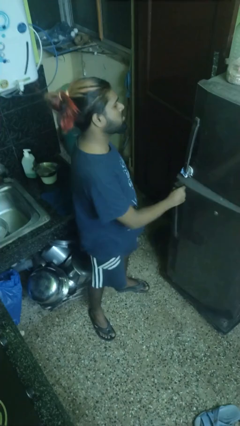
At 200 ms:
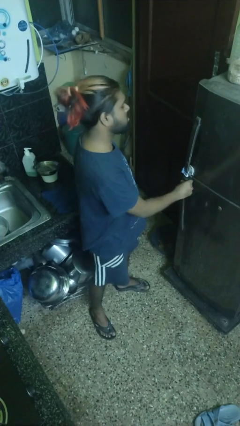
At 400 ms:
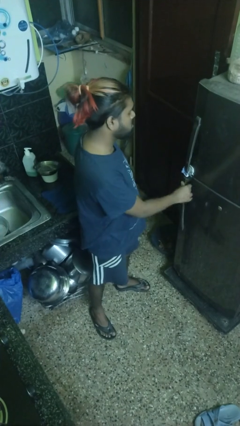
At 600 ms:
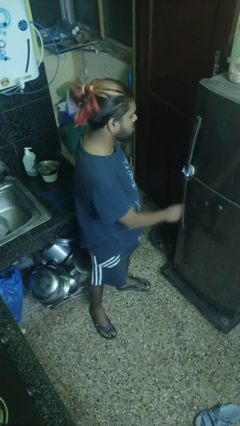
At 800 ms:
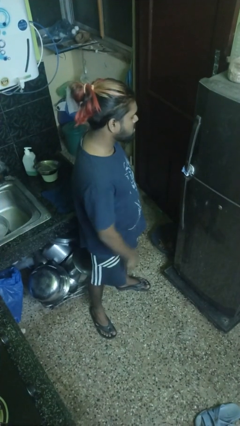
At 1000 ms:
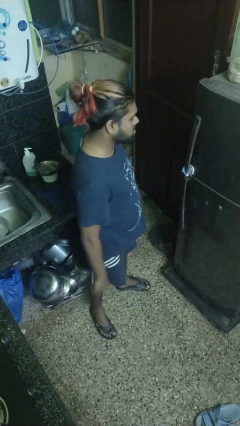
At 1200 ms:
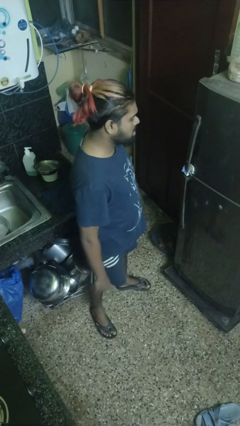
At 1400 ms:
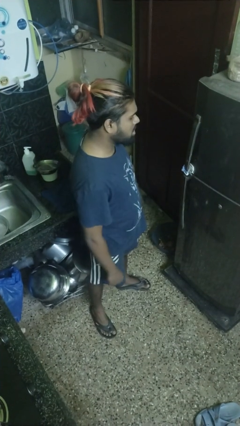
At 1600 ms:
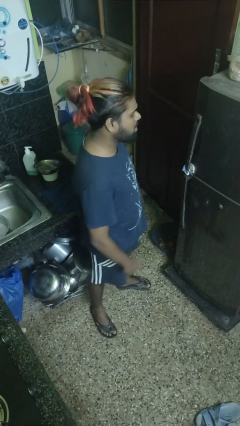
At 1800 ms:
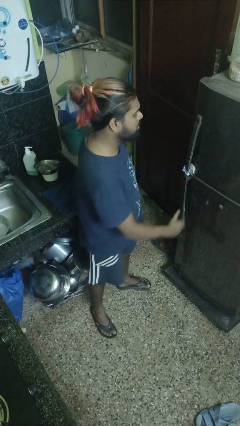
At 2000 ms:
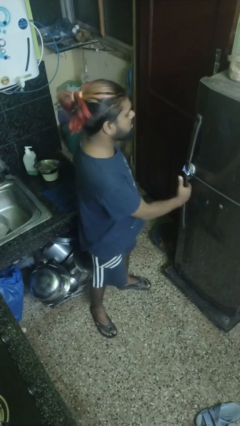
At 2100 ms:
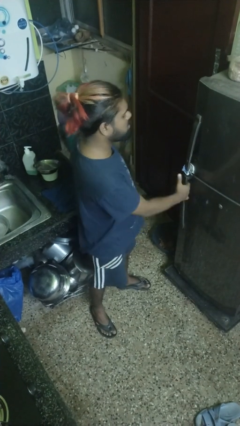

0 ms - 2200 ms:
person closes refrigerator

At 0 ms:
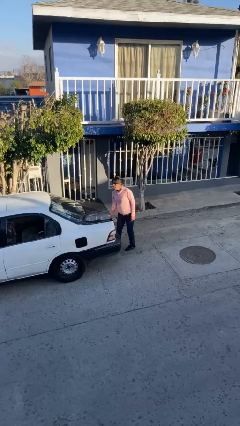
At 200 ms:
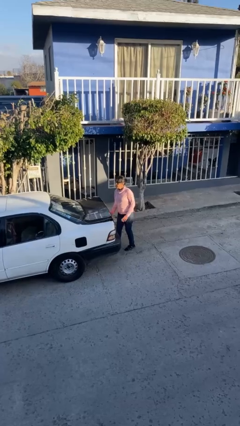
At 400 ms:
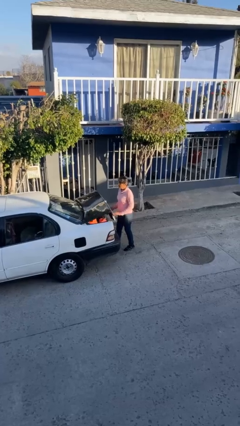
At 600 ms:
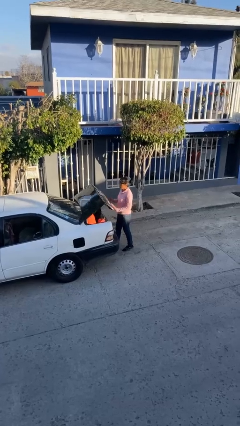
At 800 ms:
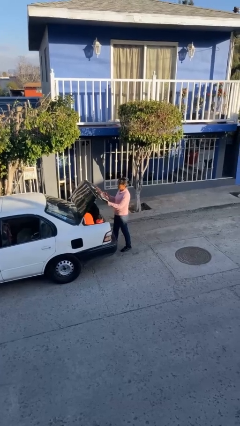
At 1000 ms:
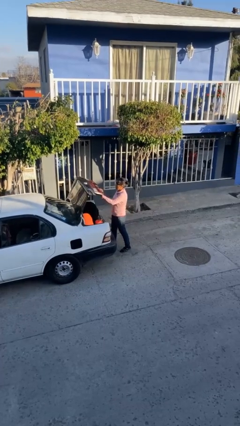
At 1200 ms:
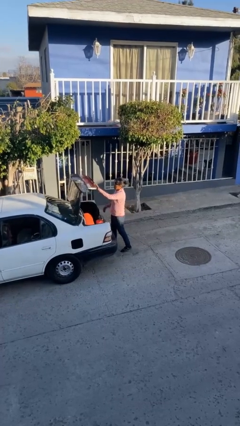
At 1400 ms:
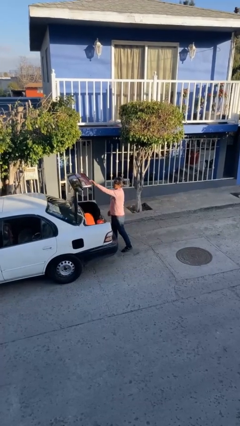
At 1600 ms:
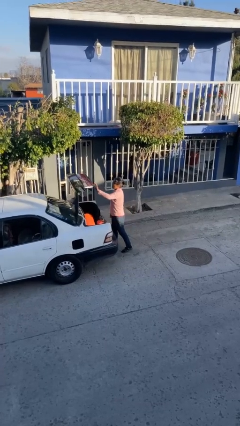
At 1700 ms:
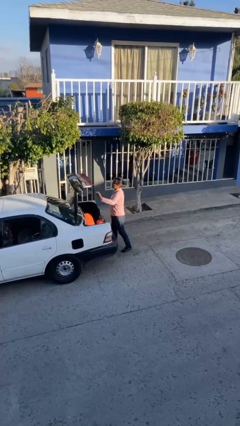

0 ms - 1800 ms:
person opens car trunk

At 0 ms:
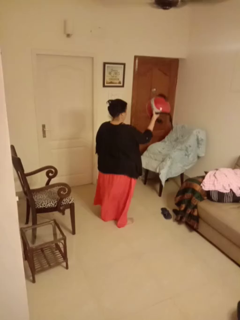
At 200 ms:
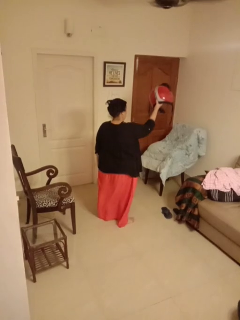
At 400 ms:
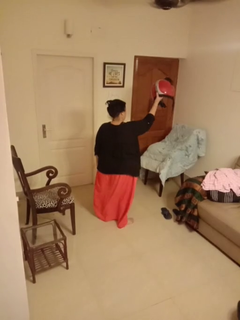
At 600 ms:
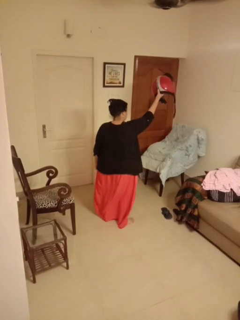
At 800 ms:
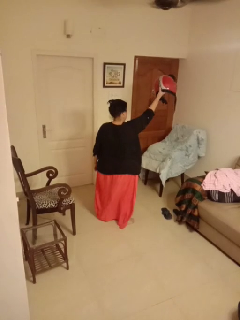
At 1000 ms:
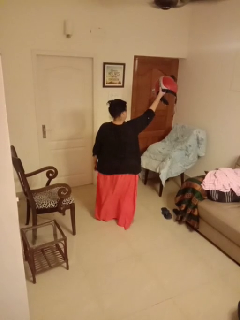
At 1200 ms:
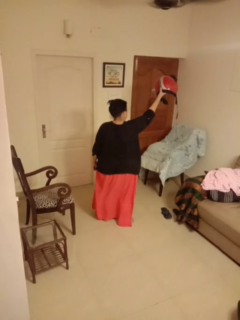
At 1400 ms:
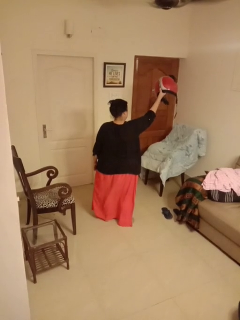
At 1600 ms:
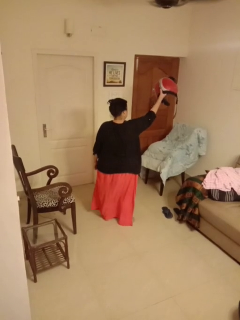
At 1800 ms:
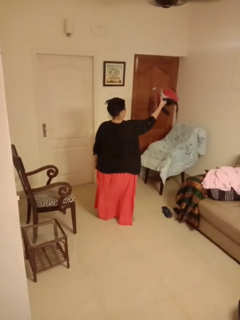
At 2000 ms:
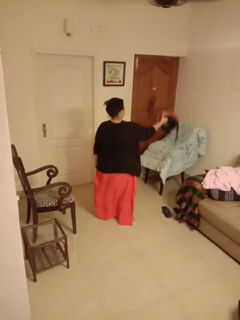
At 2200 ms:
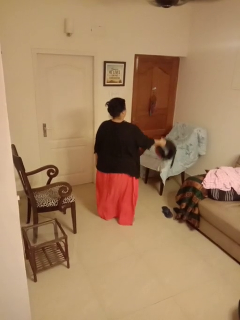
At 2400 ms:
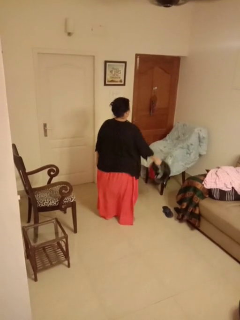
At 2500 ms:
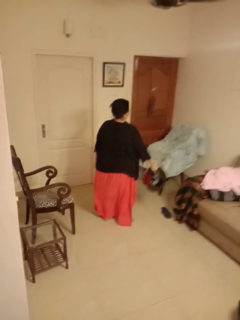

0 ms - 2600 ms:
person holds object above head

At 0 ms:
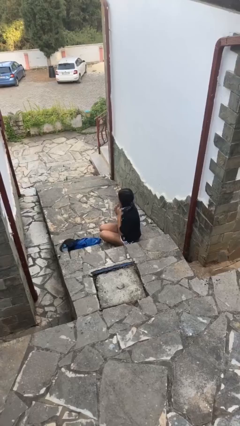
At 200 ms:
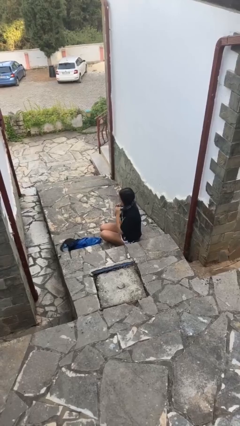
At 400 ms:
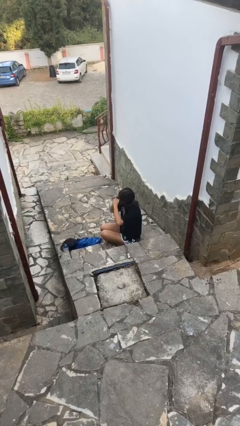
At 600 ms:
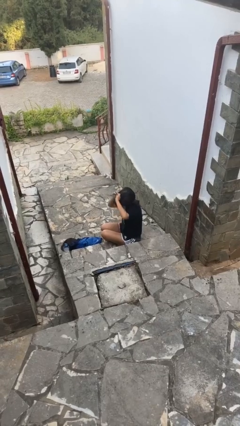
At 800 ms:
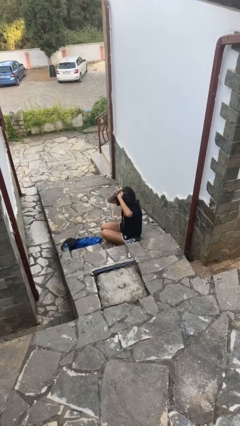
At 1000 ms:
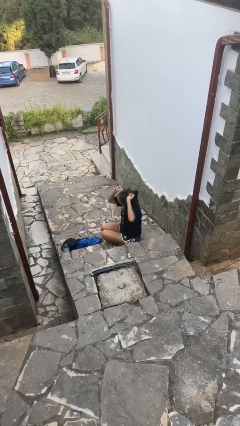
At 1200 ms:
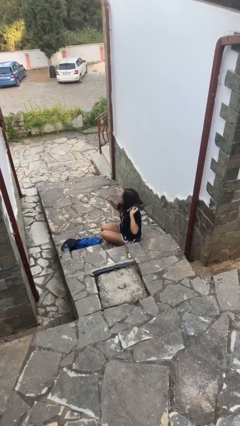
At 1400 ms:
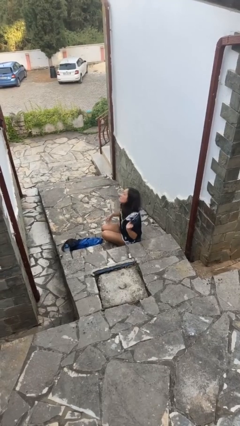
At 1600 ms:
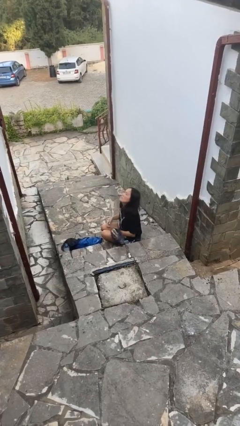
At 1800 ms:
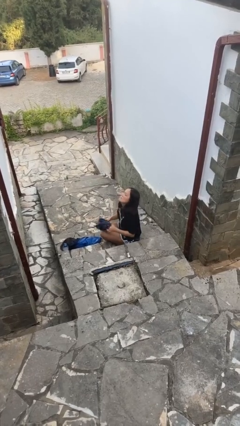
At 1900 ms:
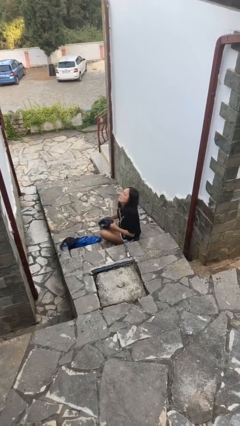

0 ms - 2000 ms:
person takes off scarf

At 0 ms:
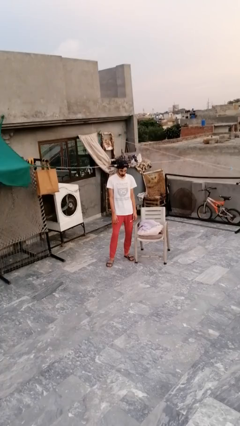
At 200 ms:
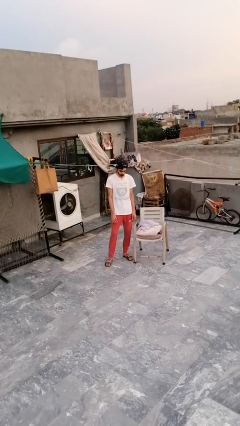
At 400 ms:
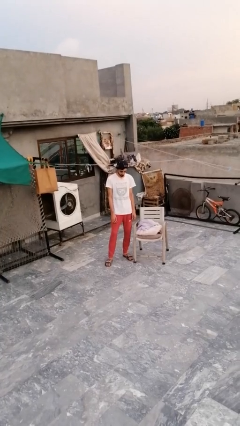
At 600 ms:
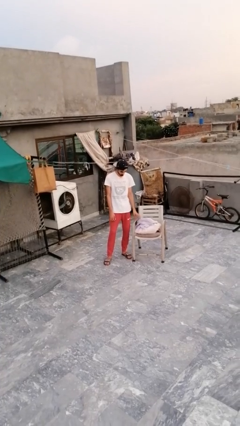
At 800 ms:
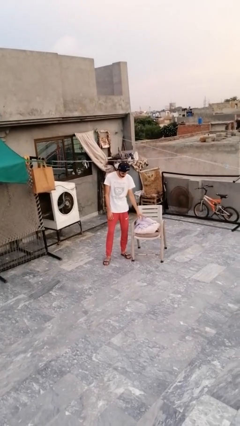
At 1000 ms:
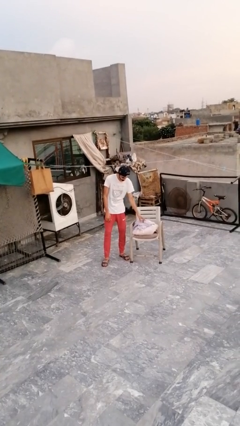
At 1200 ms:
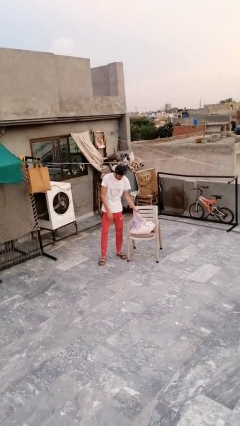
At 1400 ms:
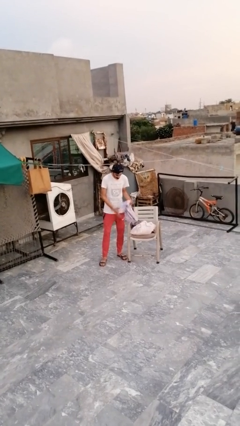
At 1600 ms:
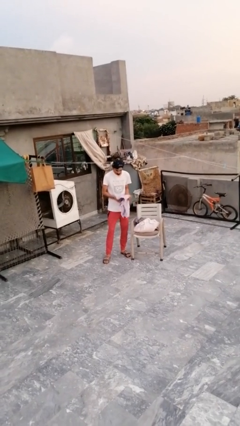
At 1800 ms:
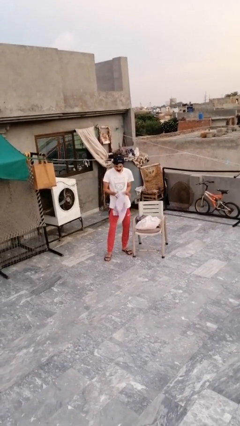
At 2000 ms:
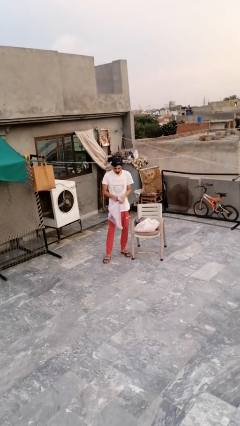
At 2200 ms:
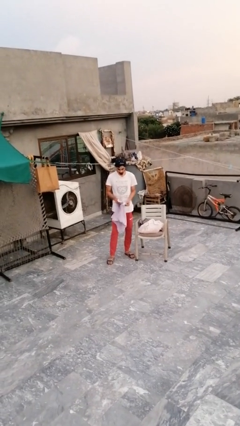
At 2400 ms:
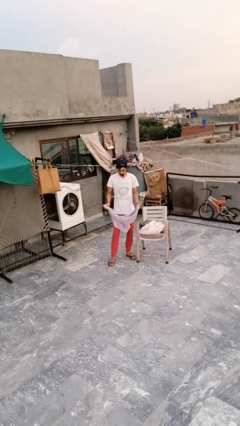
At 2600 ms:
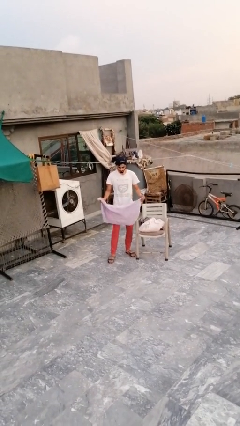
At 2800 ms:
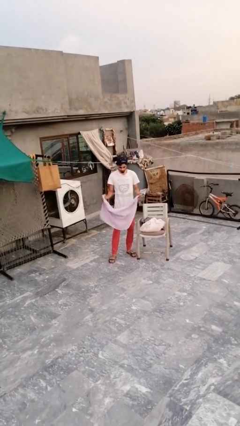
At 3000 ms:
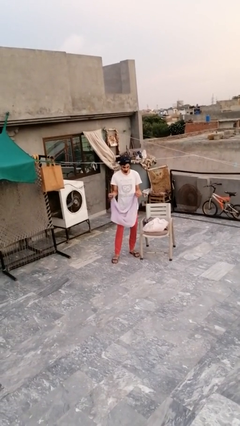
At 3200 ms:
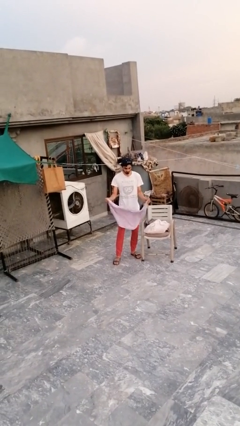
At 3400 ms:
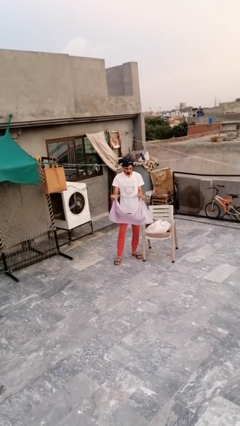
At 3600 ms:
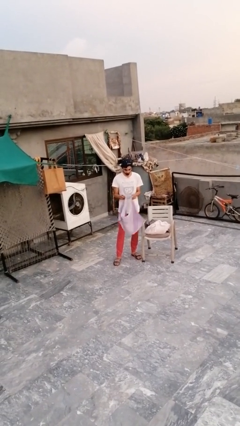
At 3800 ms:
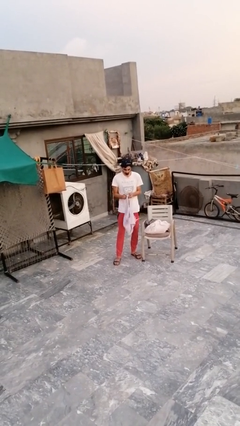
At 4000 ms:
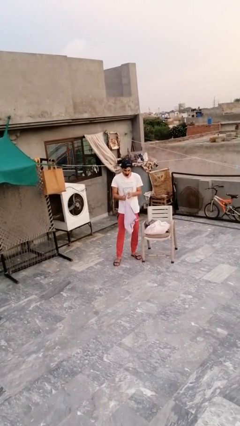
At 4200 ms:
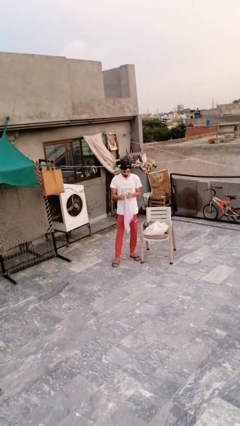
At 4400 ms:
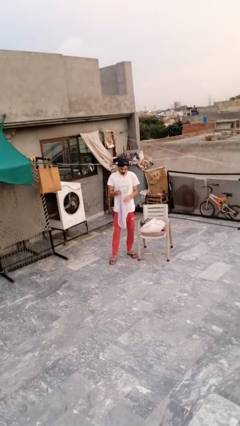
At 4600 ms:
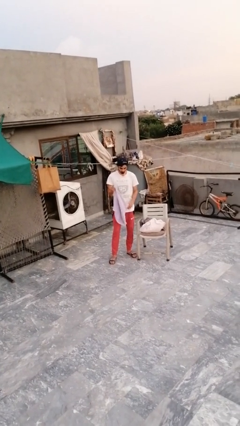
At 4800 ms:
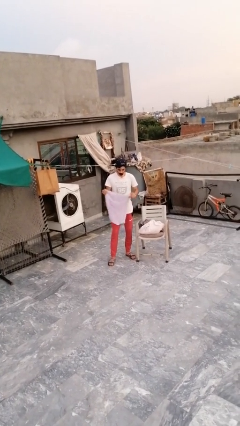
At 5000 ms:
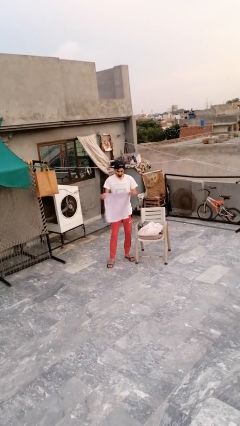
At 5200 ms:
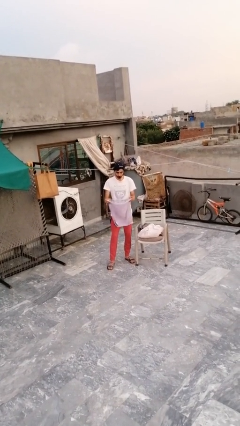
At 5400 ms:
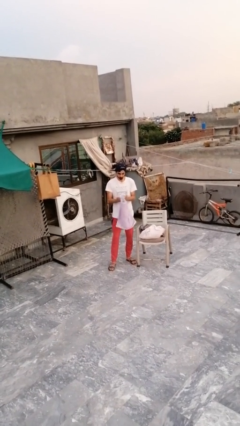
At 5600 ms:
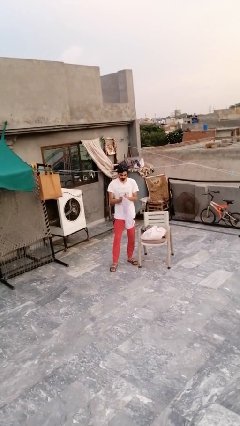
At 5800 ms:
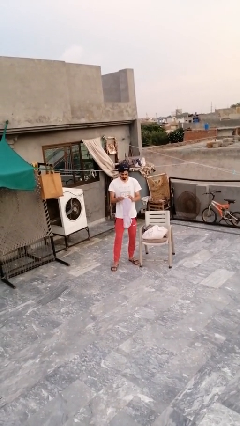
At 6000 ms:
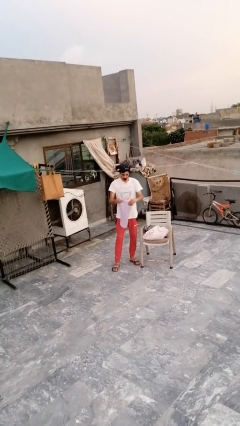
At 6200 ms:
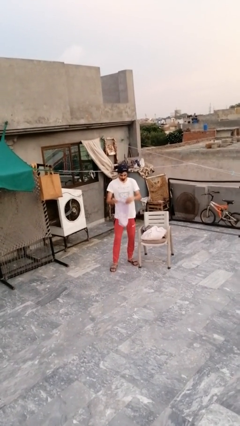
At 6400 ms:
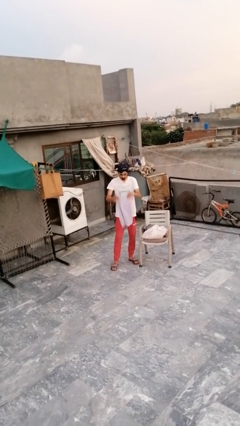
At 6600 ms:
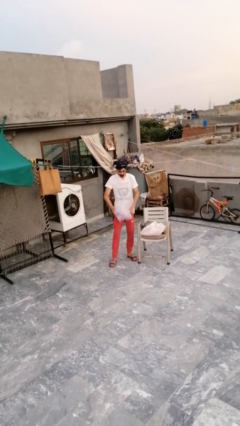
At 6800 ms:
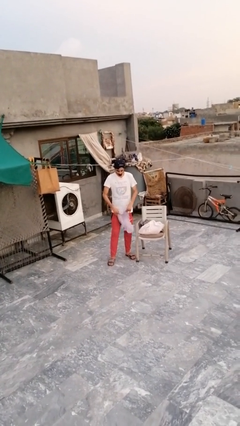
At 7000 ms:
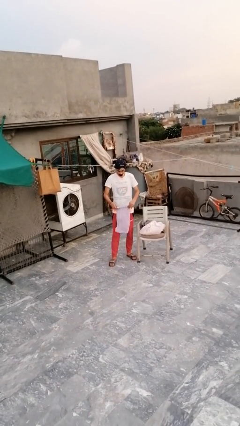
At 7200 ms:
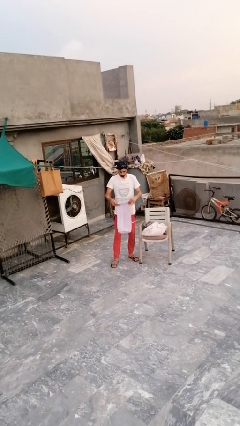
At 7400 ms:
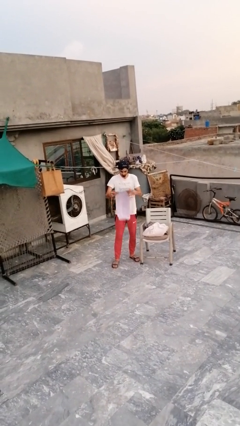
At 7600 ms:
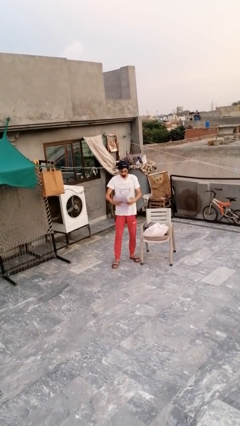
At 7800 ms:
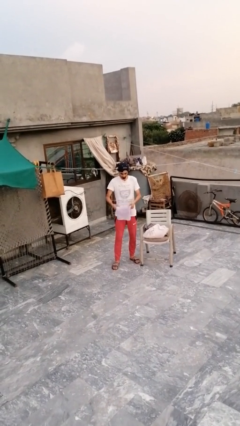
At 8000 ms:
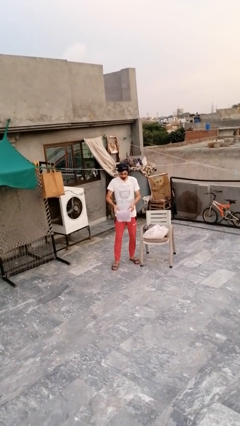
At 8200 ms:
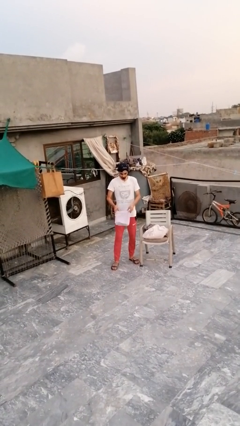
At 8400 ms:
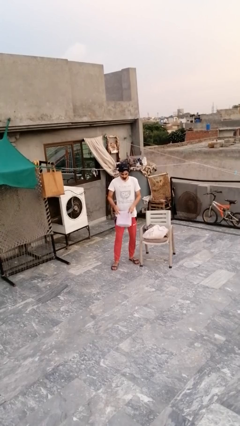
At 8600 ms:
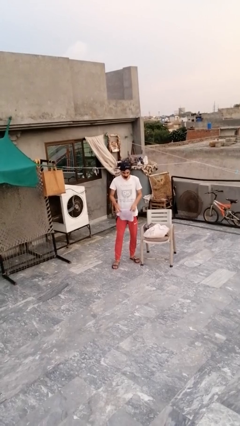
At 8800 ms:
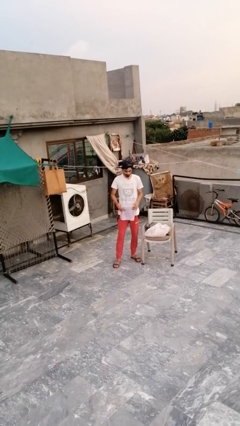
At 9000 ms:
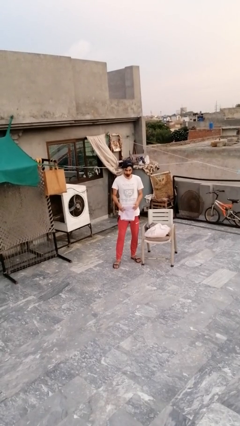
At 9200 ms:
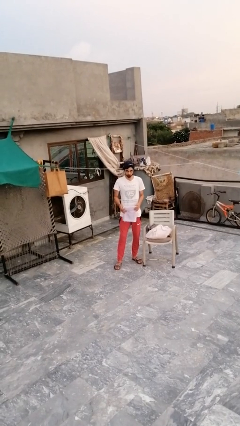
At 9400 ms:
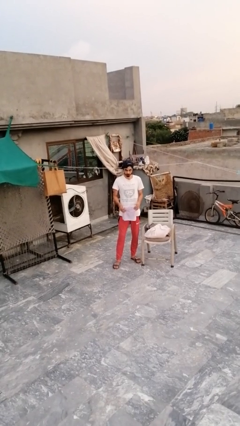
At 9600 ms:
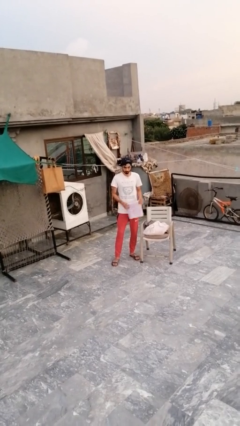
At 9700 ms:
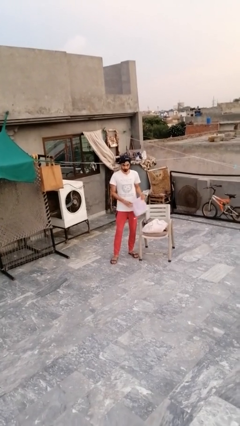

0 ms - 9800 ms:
person folds towel
